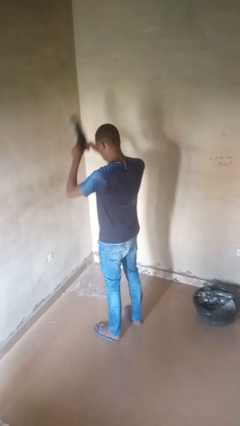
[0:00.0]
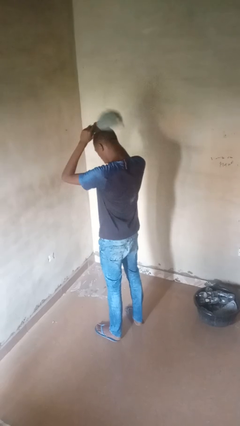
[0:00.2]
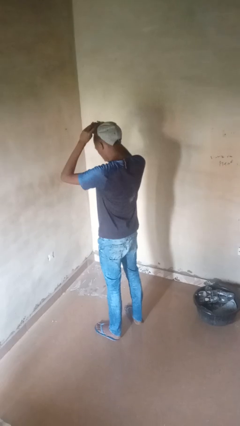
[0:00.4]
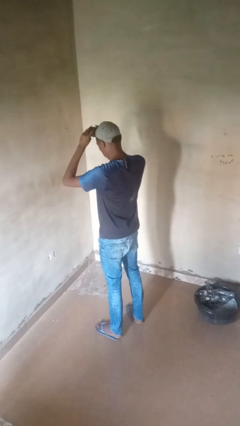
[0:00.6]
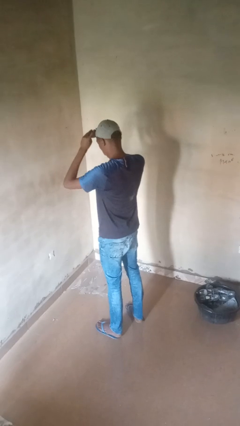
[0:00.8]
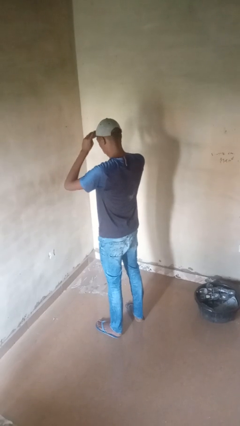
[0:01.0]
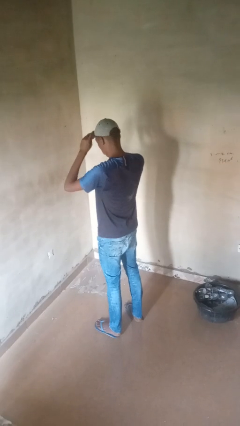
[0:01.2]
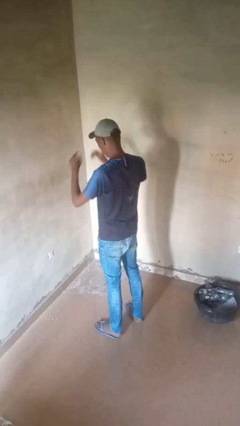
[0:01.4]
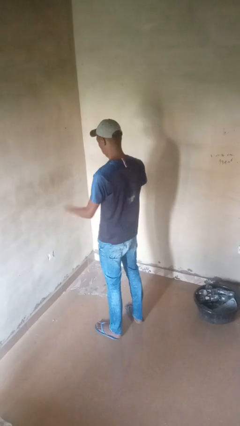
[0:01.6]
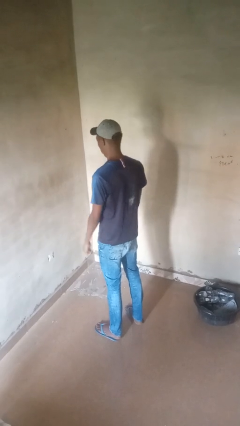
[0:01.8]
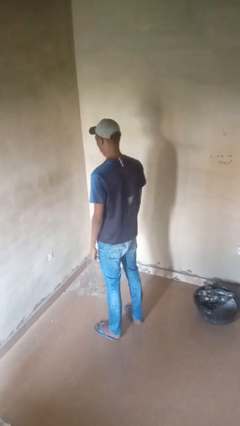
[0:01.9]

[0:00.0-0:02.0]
person puts on hat

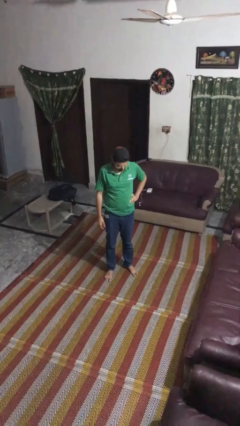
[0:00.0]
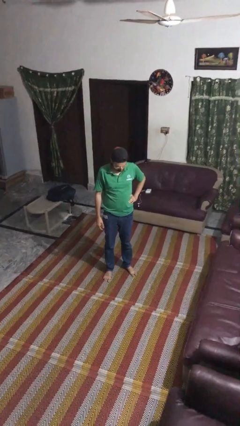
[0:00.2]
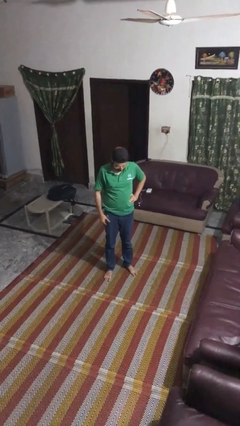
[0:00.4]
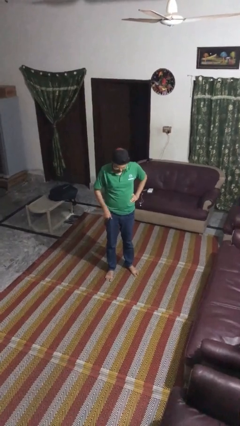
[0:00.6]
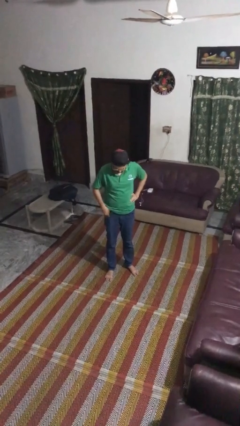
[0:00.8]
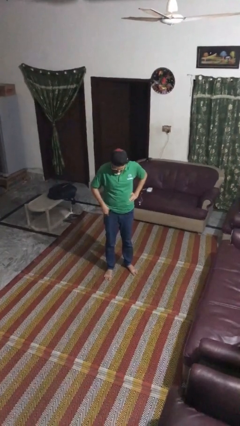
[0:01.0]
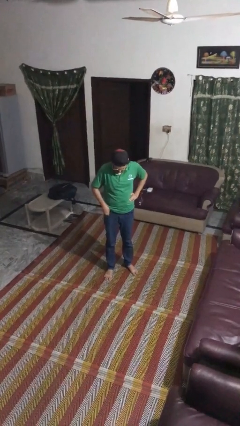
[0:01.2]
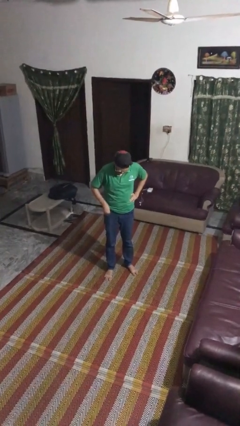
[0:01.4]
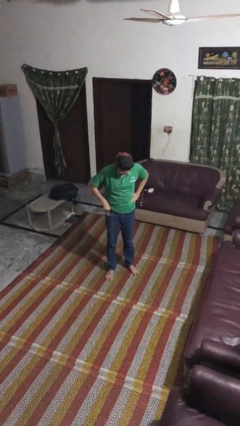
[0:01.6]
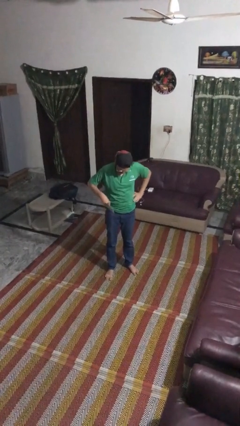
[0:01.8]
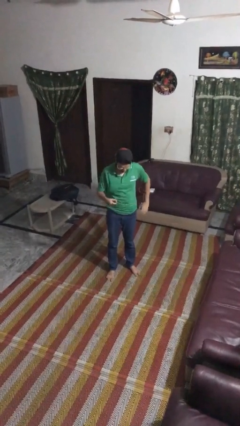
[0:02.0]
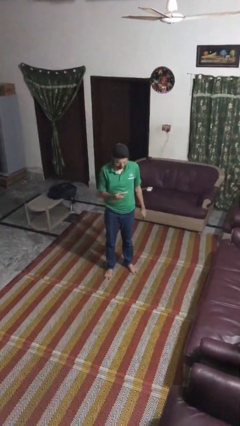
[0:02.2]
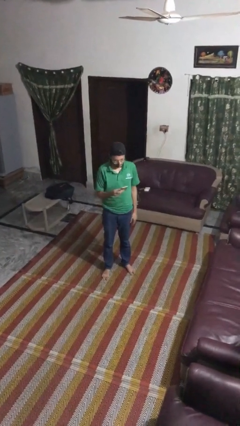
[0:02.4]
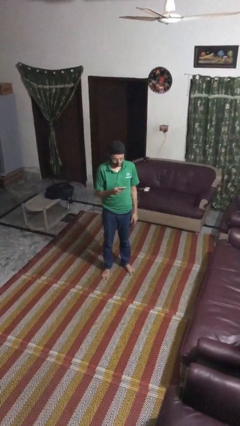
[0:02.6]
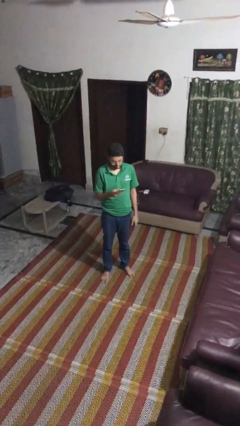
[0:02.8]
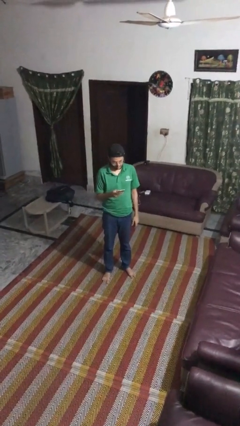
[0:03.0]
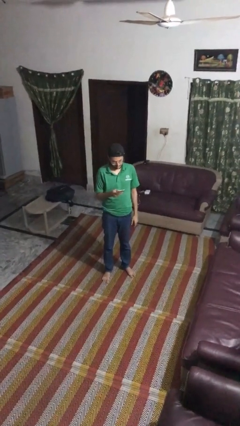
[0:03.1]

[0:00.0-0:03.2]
person takes phone from pocket

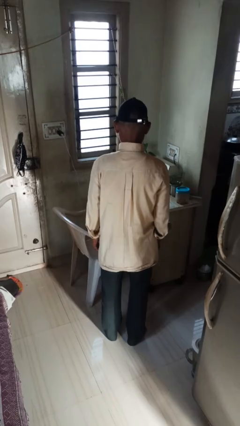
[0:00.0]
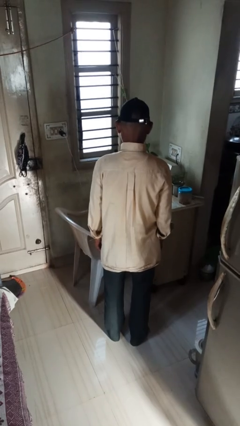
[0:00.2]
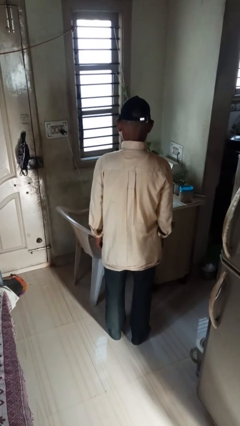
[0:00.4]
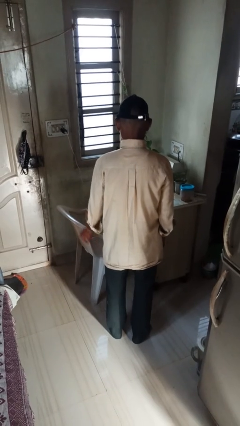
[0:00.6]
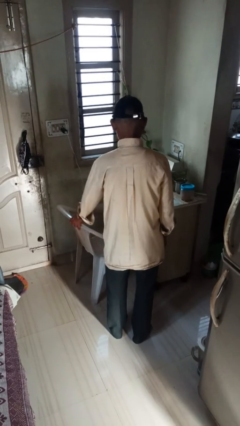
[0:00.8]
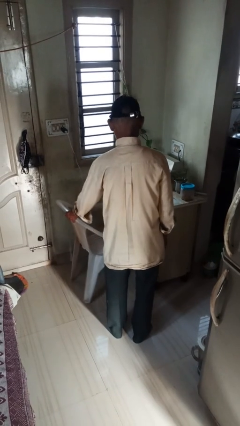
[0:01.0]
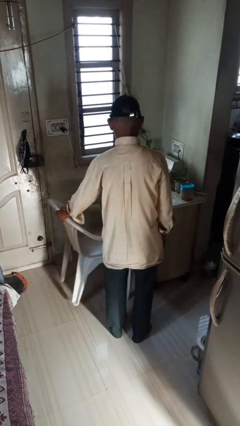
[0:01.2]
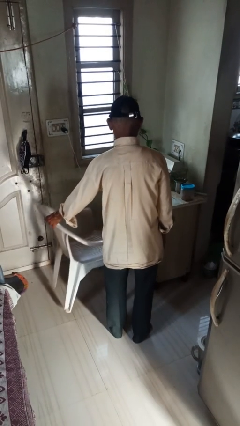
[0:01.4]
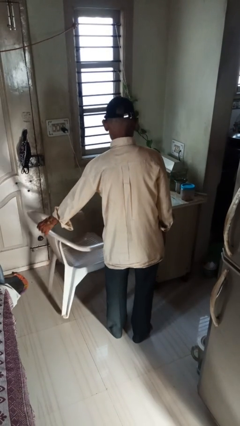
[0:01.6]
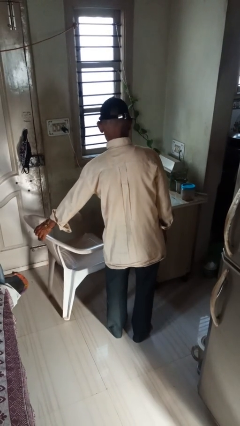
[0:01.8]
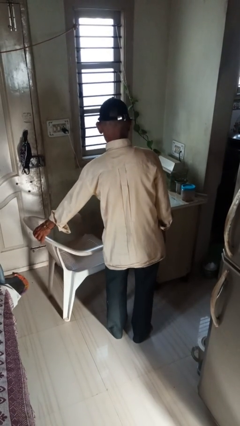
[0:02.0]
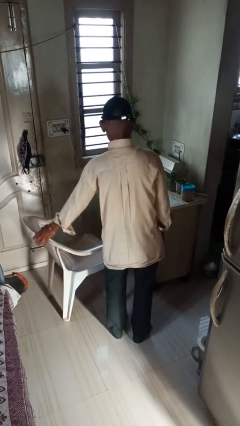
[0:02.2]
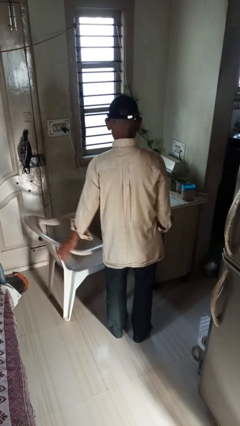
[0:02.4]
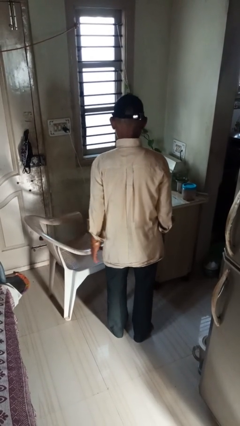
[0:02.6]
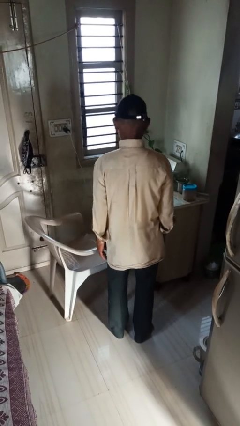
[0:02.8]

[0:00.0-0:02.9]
person pulls out chair

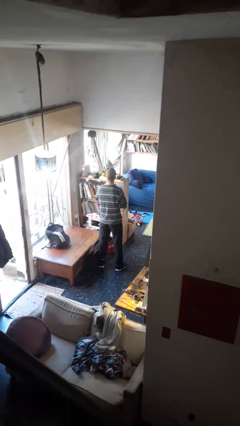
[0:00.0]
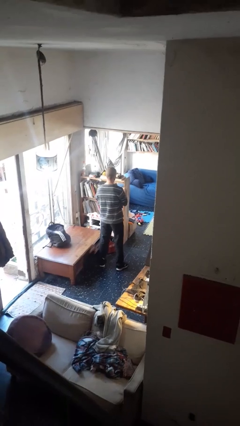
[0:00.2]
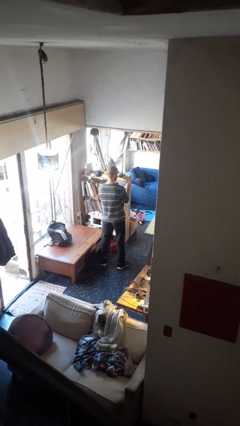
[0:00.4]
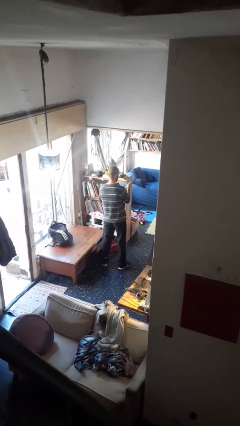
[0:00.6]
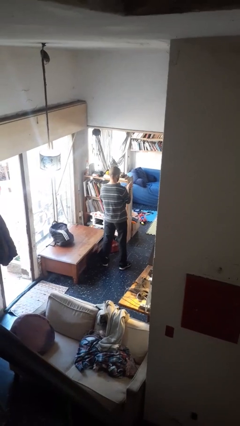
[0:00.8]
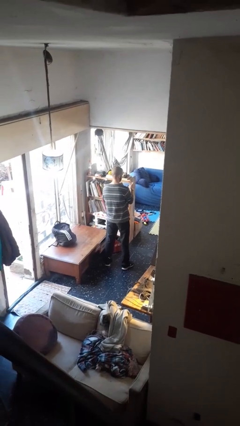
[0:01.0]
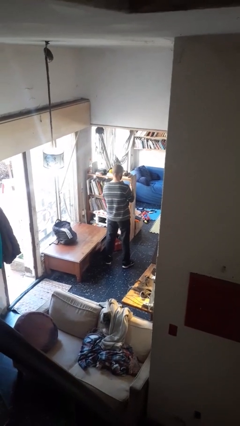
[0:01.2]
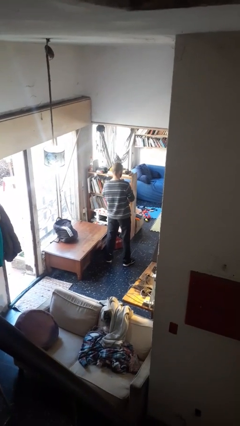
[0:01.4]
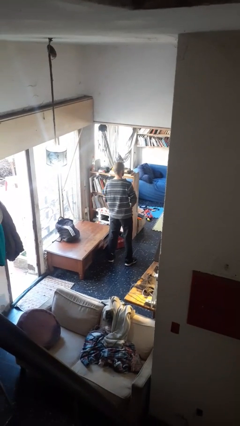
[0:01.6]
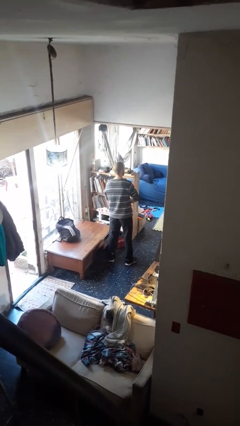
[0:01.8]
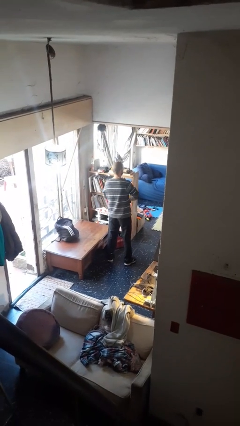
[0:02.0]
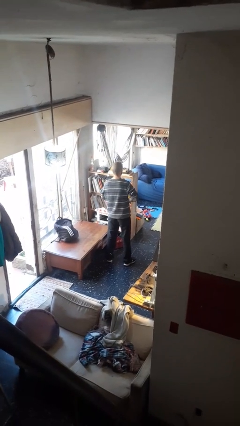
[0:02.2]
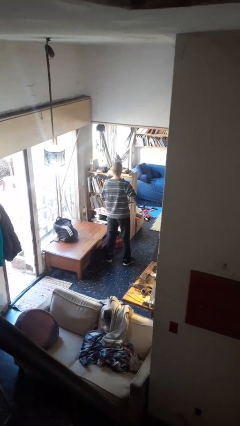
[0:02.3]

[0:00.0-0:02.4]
person takes off wristwatch

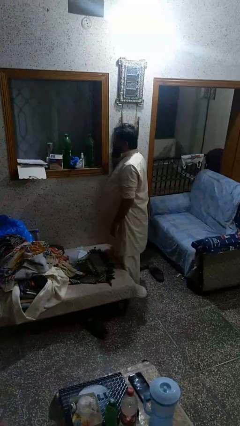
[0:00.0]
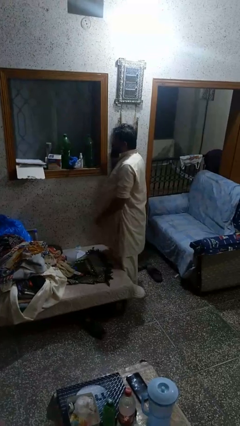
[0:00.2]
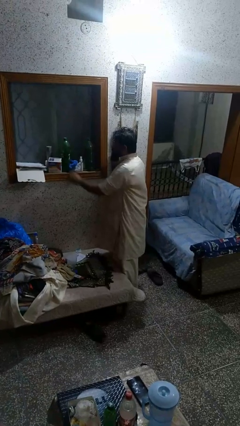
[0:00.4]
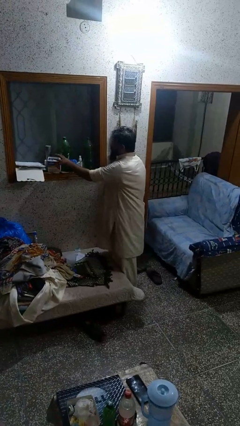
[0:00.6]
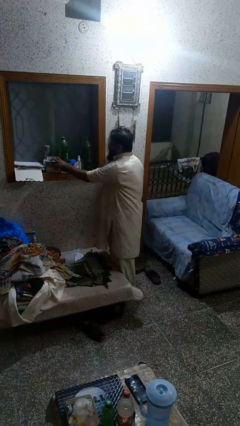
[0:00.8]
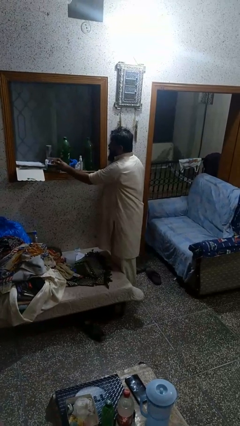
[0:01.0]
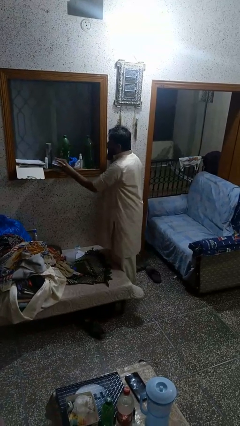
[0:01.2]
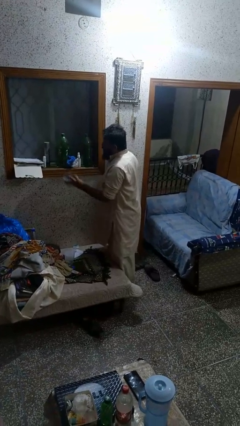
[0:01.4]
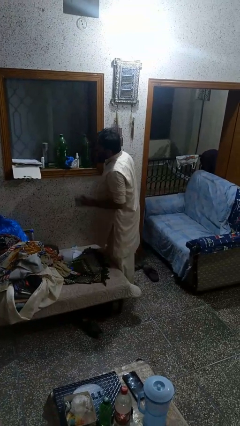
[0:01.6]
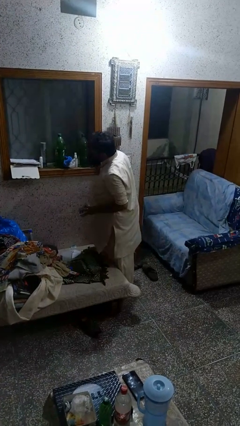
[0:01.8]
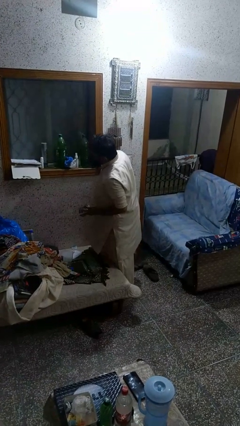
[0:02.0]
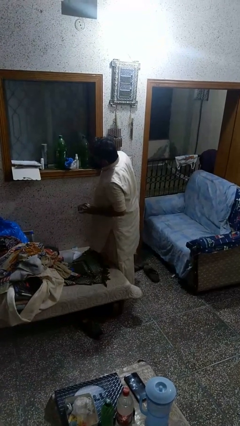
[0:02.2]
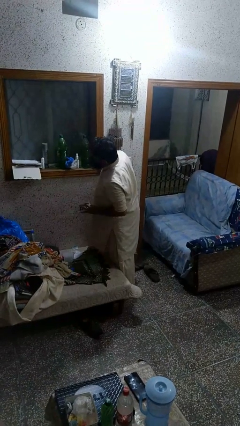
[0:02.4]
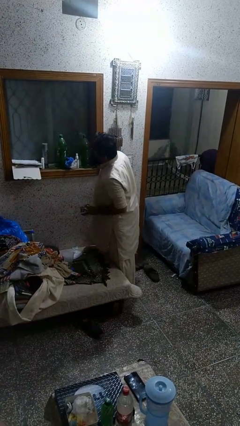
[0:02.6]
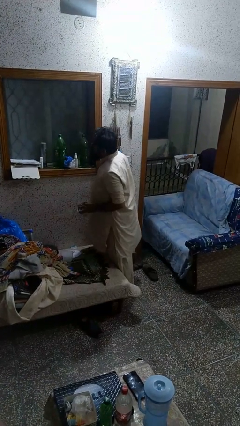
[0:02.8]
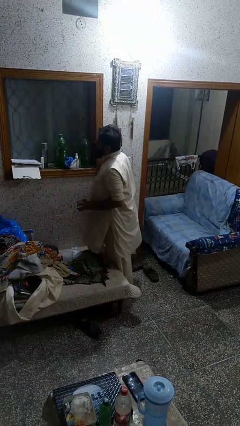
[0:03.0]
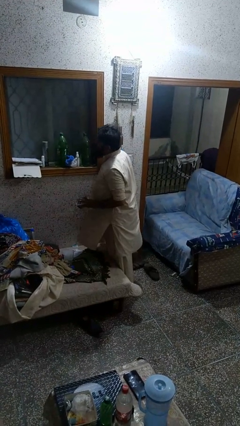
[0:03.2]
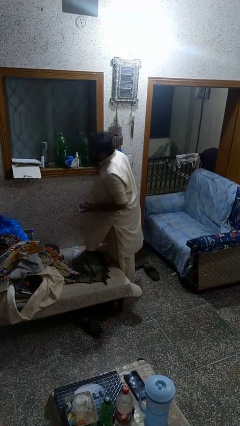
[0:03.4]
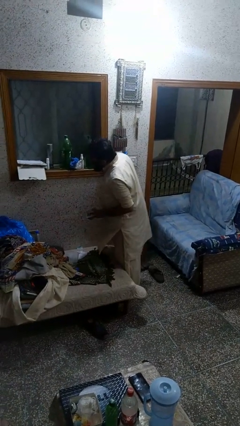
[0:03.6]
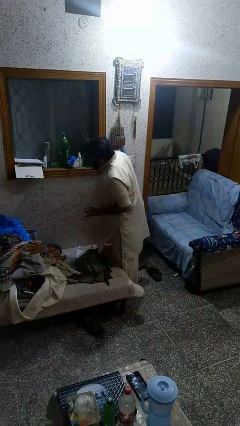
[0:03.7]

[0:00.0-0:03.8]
person searches in cabinet

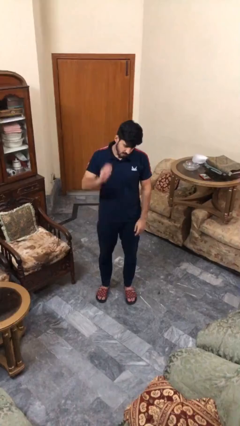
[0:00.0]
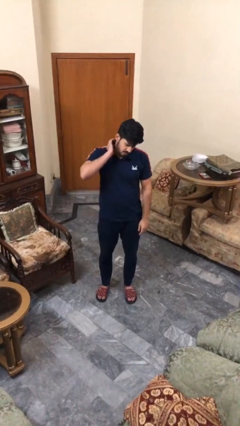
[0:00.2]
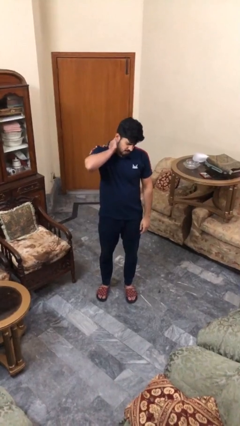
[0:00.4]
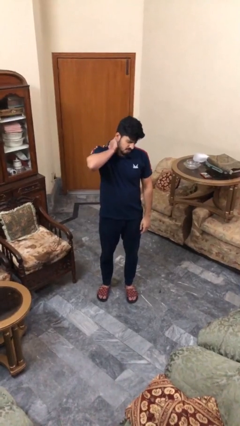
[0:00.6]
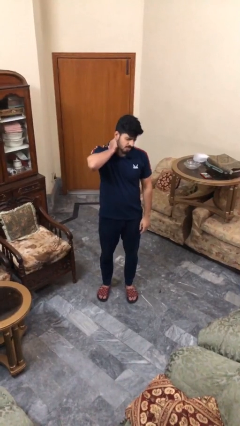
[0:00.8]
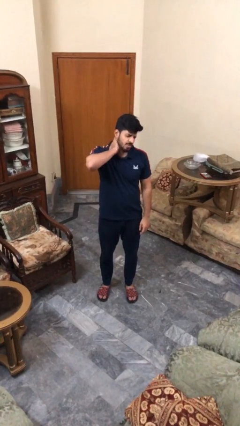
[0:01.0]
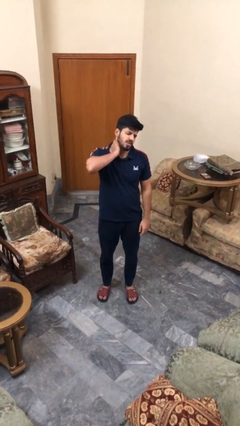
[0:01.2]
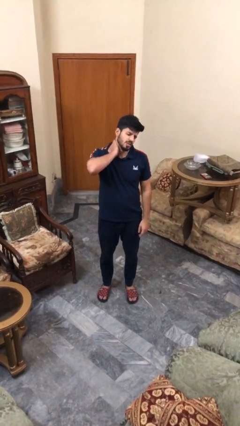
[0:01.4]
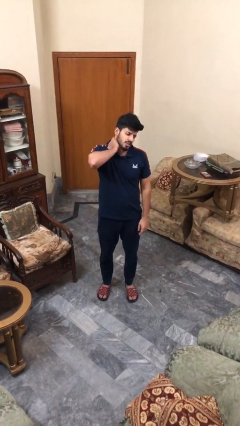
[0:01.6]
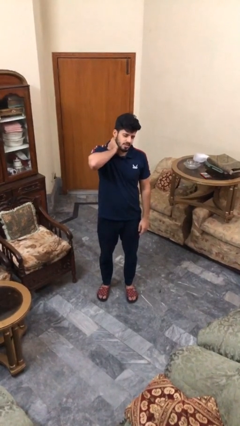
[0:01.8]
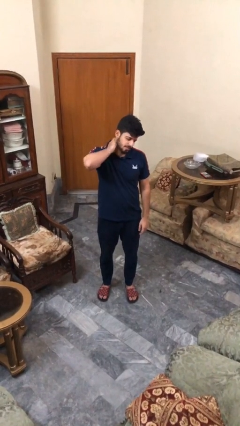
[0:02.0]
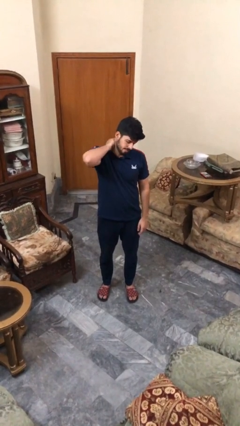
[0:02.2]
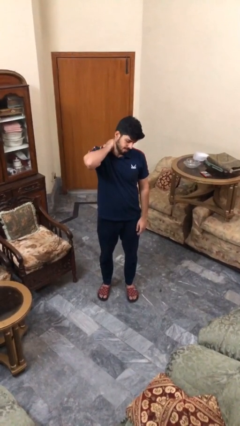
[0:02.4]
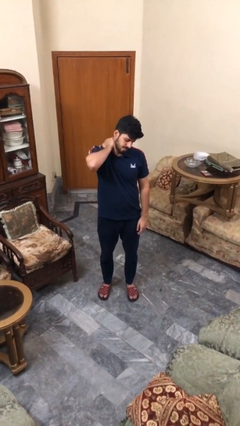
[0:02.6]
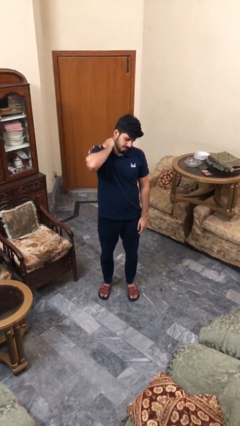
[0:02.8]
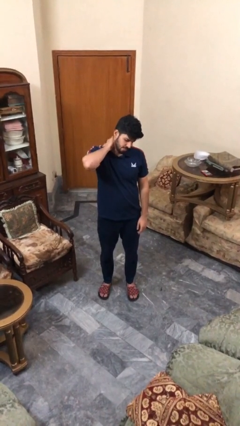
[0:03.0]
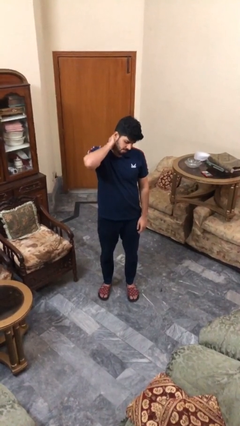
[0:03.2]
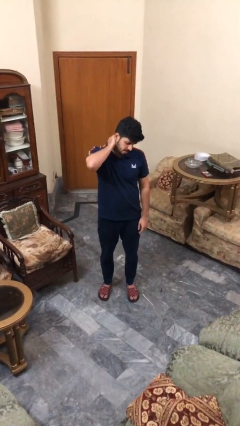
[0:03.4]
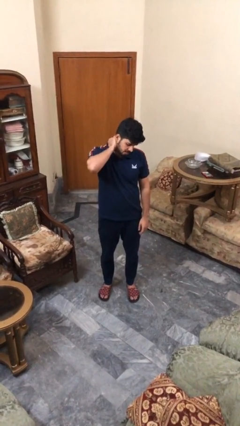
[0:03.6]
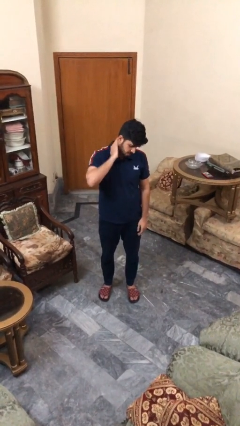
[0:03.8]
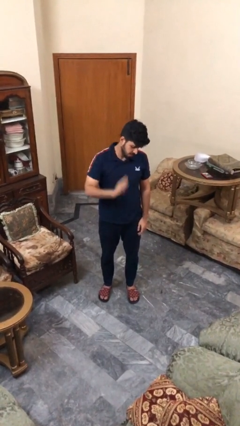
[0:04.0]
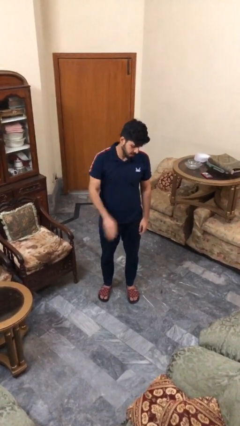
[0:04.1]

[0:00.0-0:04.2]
person rubs neck
